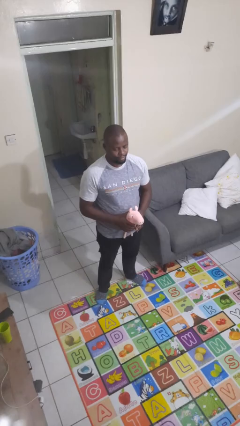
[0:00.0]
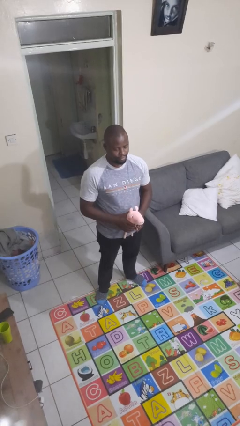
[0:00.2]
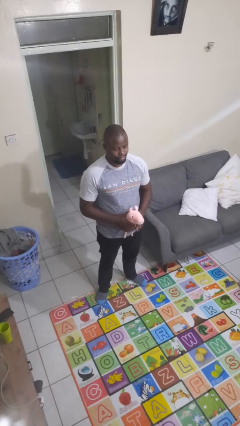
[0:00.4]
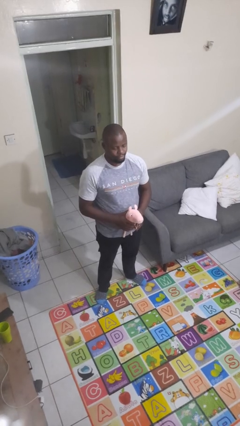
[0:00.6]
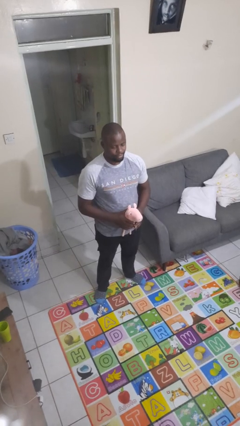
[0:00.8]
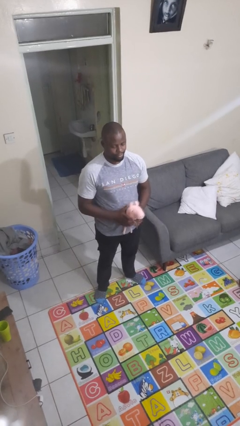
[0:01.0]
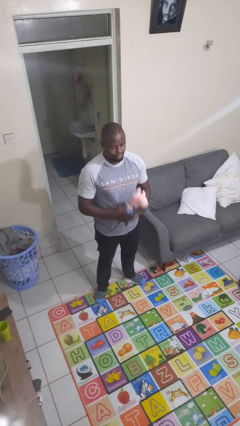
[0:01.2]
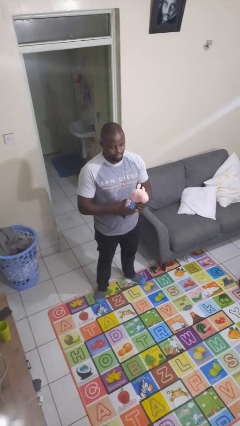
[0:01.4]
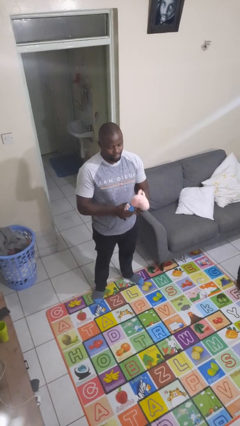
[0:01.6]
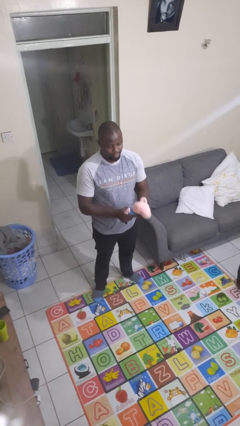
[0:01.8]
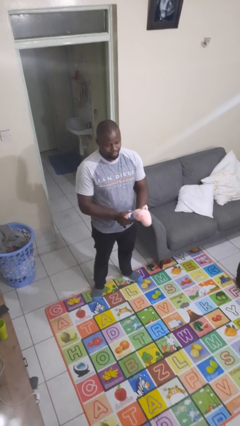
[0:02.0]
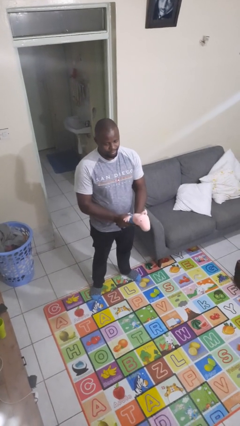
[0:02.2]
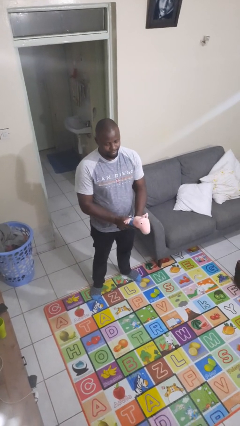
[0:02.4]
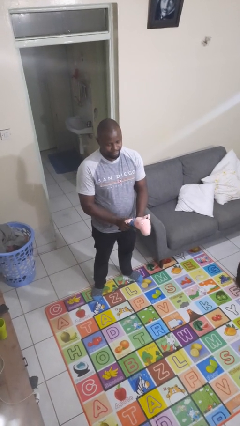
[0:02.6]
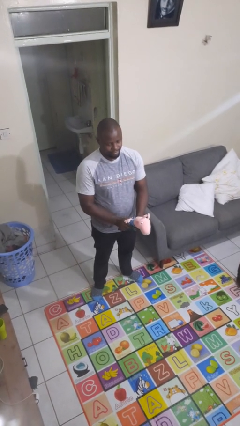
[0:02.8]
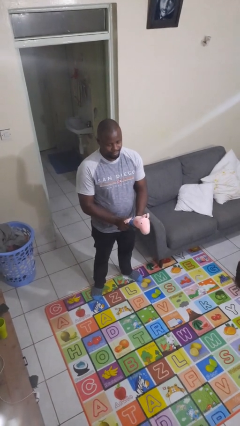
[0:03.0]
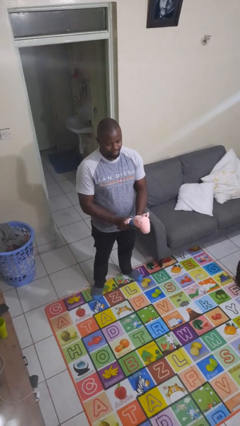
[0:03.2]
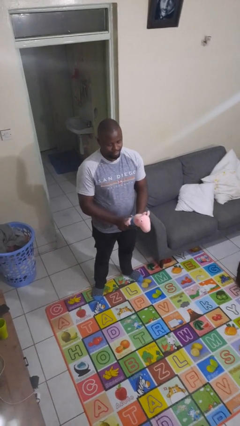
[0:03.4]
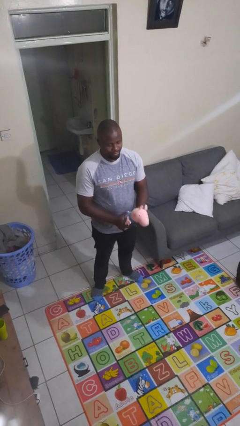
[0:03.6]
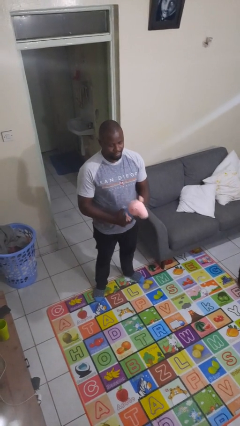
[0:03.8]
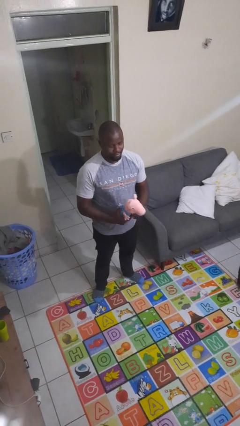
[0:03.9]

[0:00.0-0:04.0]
person squeezes object

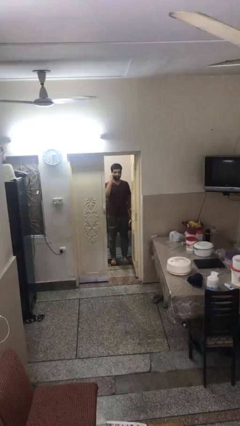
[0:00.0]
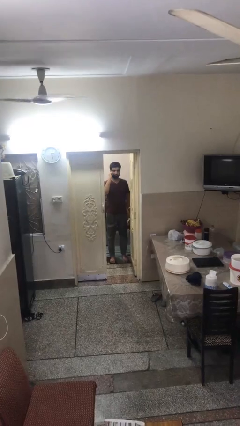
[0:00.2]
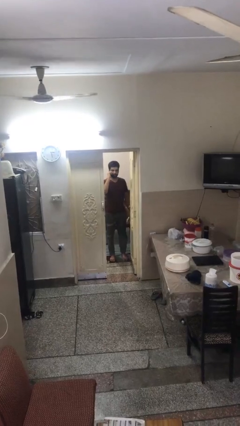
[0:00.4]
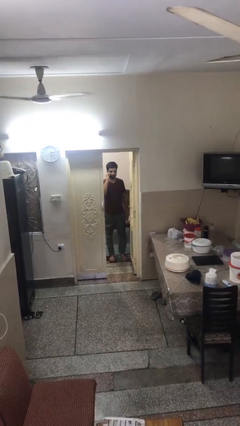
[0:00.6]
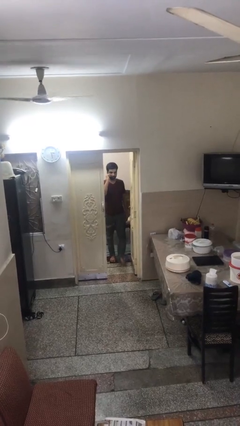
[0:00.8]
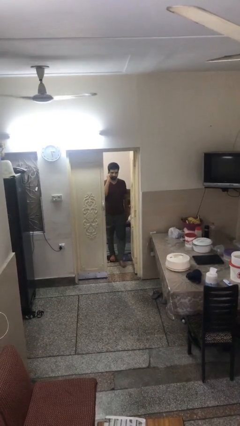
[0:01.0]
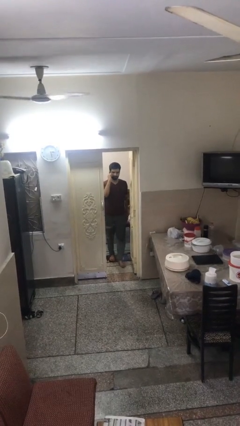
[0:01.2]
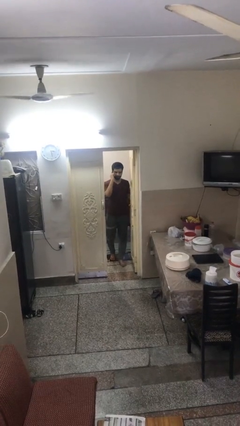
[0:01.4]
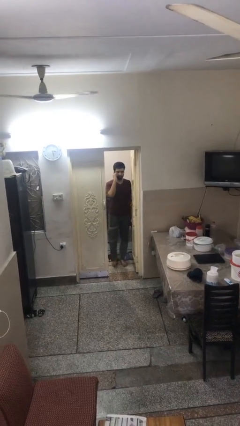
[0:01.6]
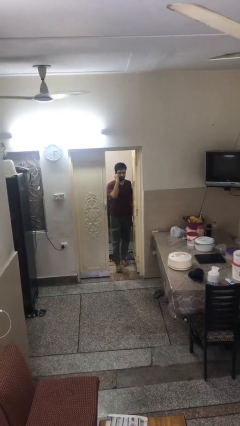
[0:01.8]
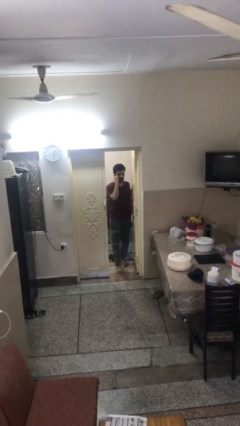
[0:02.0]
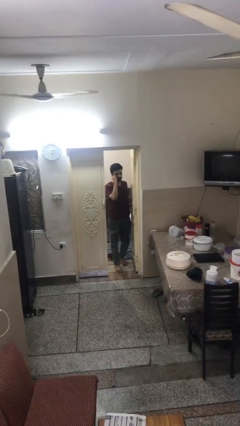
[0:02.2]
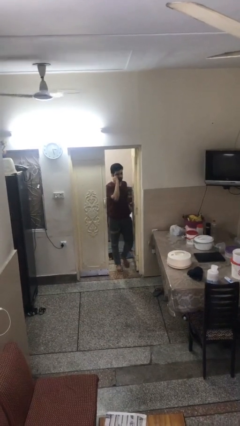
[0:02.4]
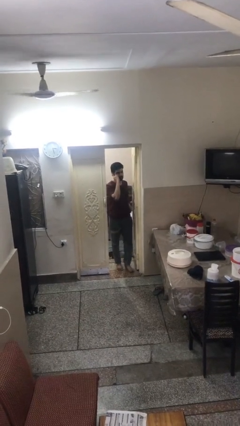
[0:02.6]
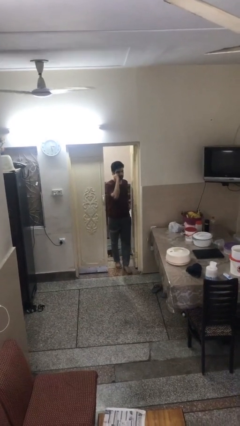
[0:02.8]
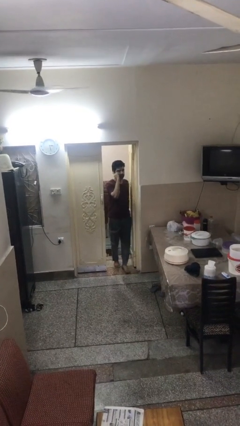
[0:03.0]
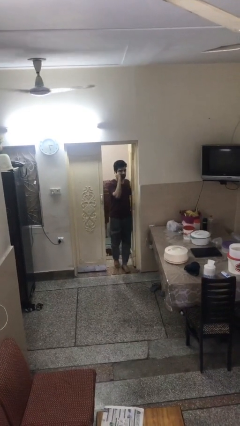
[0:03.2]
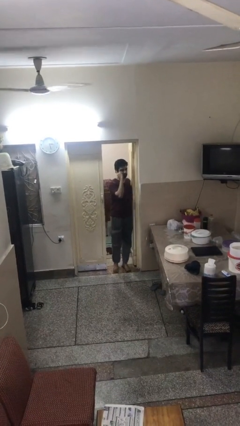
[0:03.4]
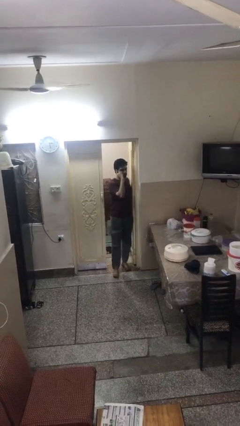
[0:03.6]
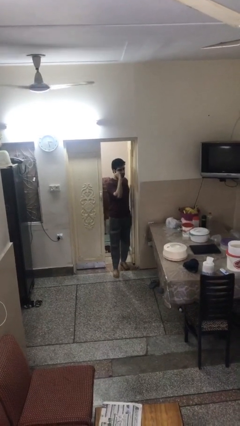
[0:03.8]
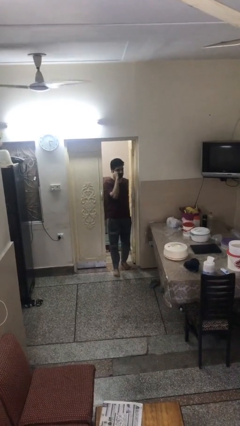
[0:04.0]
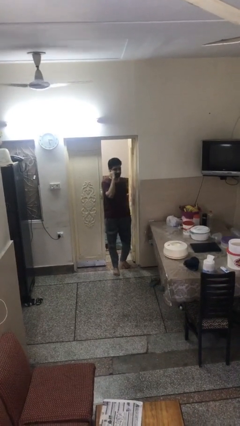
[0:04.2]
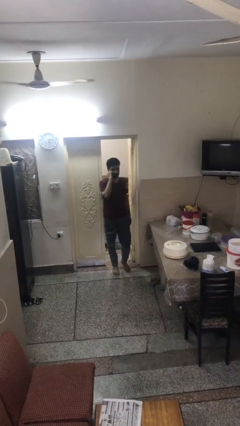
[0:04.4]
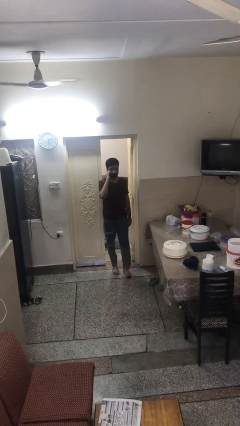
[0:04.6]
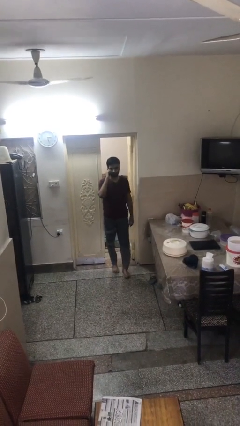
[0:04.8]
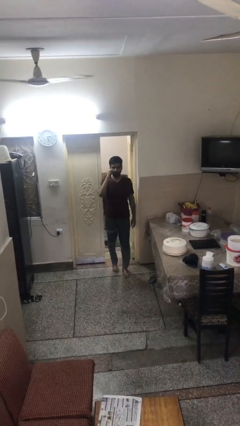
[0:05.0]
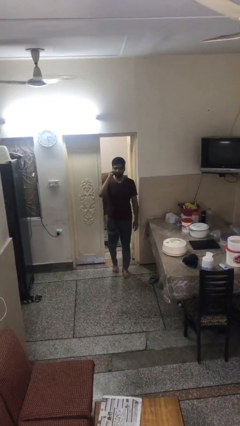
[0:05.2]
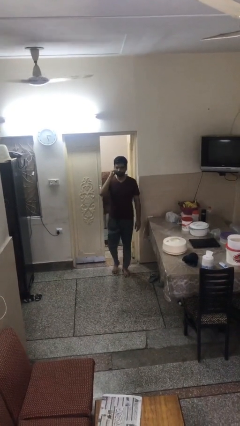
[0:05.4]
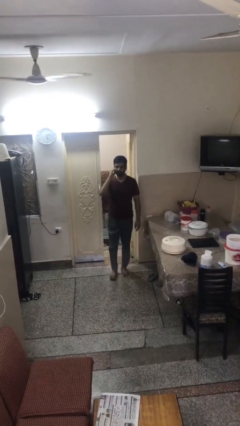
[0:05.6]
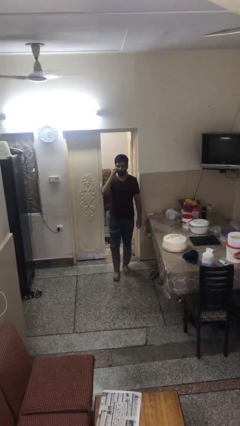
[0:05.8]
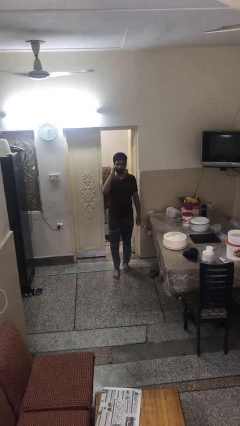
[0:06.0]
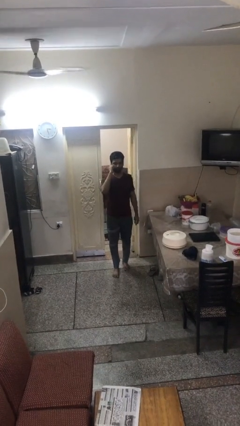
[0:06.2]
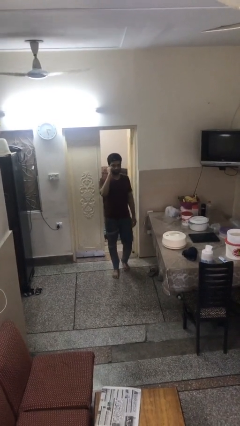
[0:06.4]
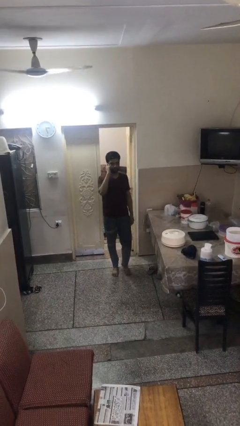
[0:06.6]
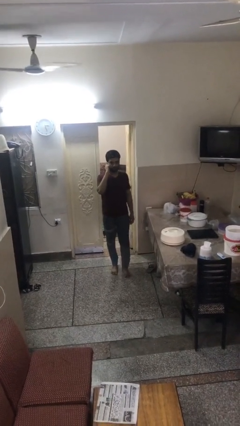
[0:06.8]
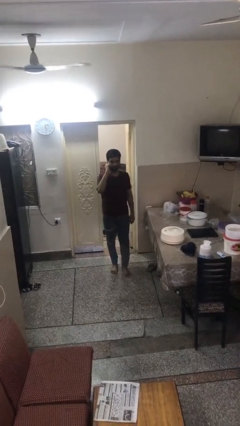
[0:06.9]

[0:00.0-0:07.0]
person enters scene through structure

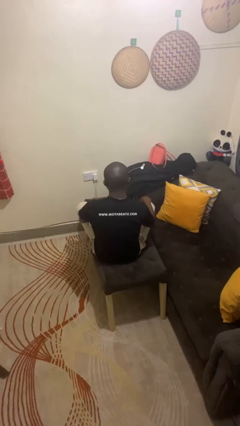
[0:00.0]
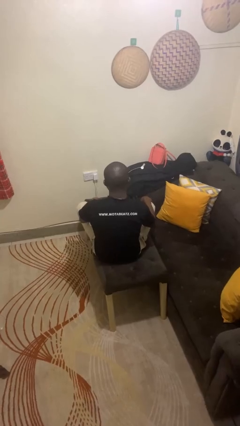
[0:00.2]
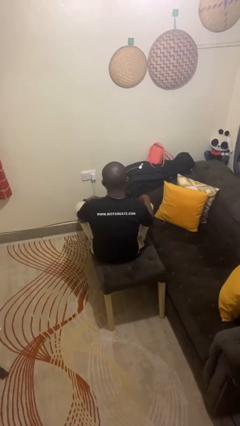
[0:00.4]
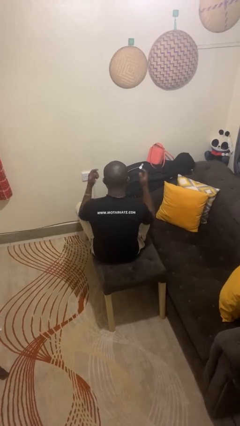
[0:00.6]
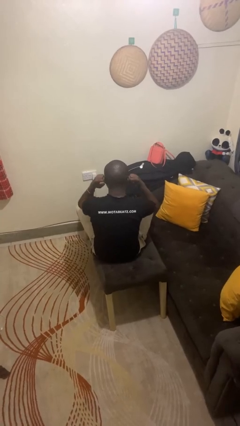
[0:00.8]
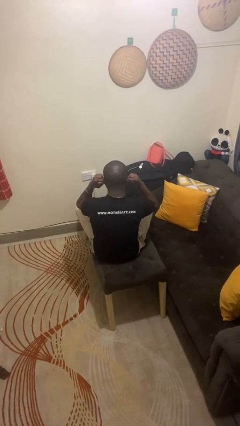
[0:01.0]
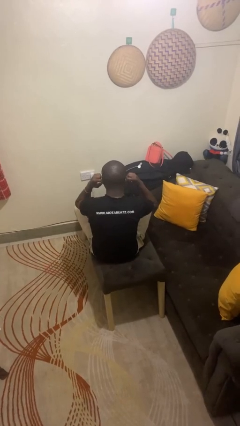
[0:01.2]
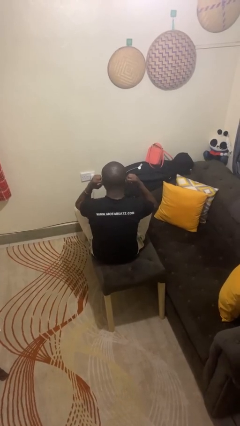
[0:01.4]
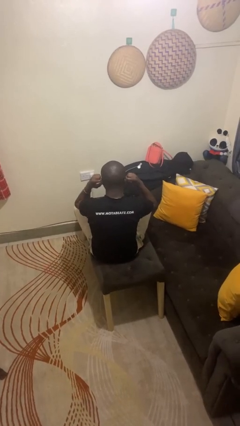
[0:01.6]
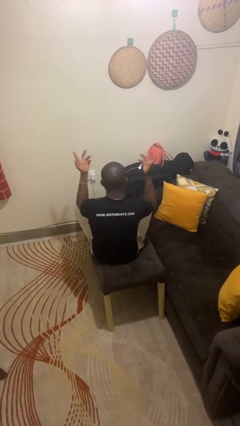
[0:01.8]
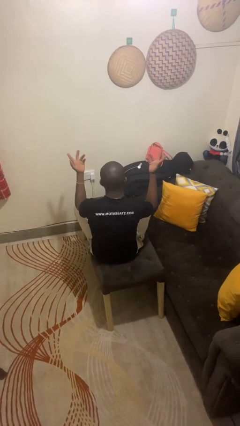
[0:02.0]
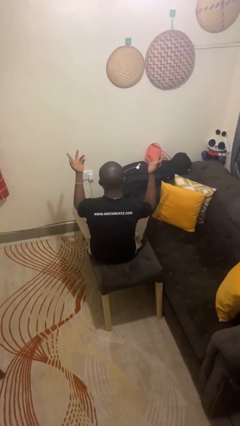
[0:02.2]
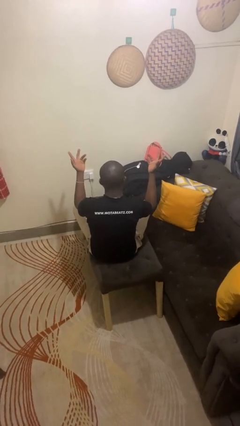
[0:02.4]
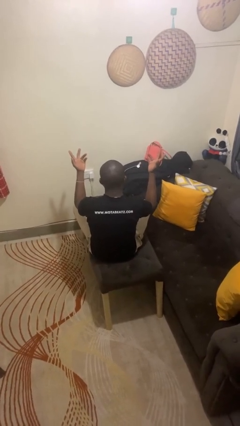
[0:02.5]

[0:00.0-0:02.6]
person puts fingers in ear

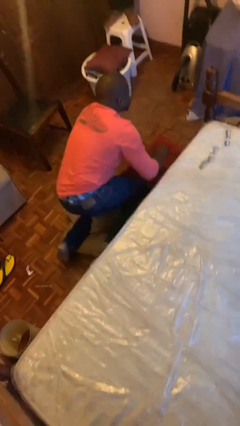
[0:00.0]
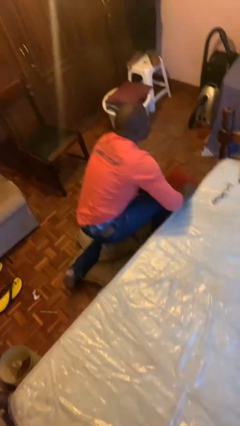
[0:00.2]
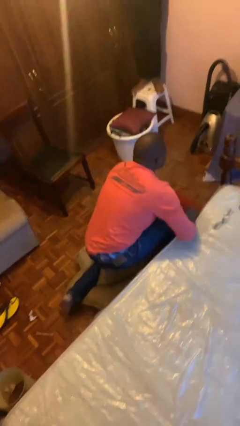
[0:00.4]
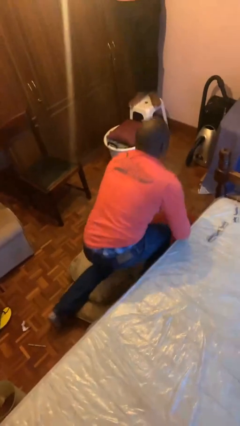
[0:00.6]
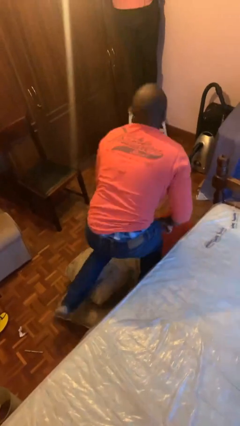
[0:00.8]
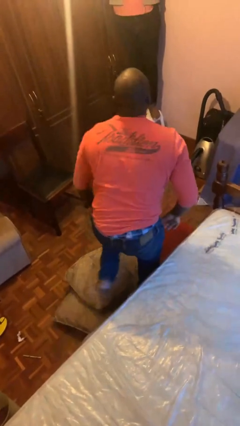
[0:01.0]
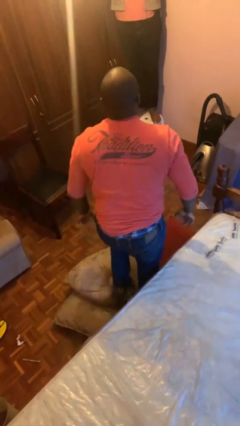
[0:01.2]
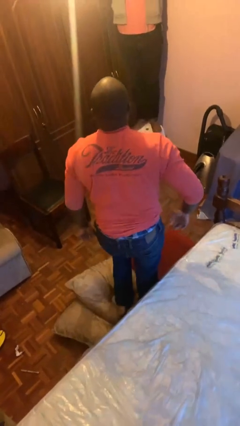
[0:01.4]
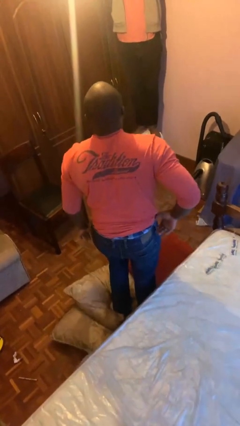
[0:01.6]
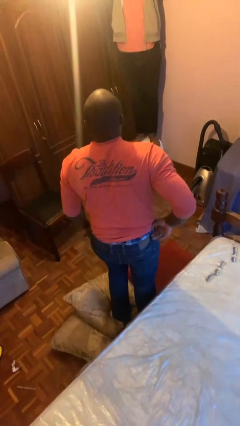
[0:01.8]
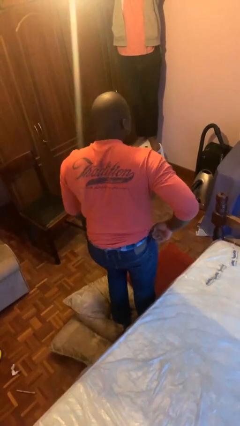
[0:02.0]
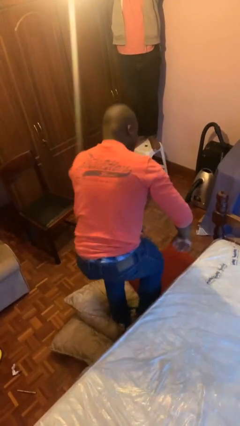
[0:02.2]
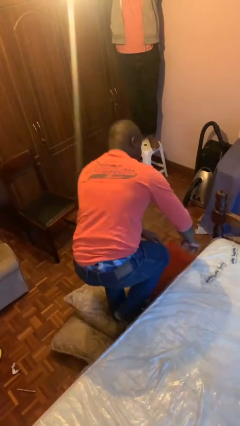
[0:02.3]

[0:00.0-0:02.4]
person stands up from floor

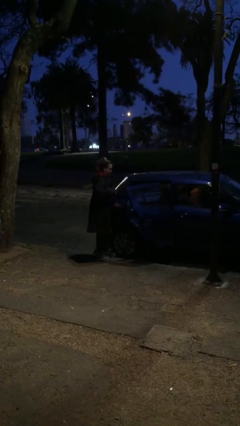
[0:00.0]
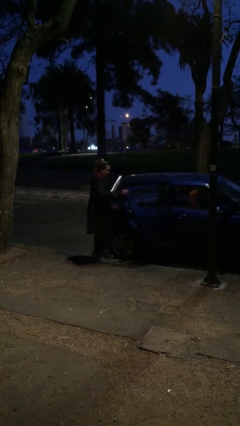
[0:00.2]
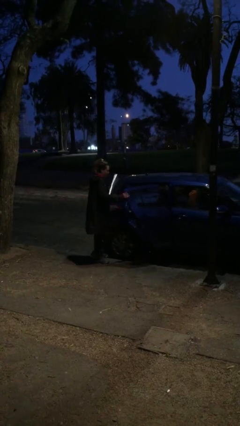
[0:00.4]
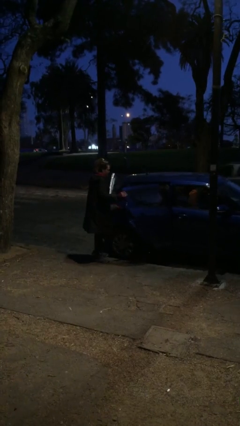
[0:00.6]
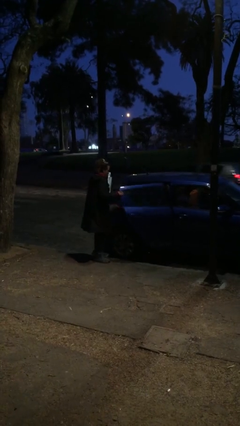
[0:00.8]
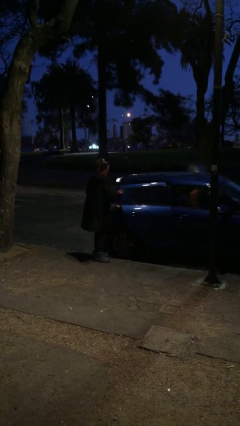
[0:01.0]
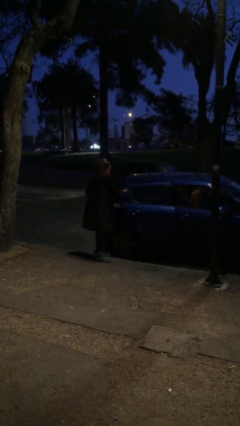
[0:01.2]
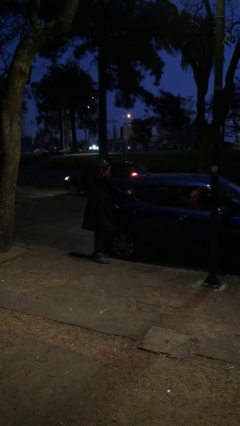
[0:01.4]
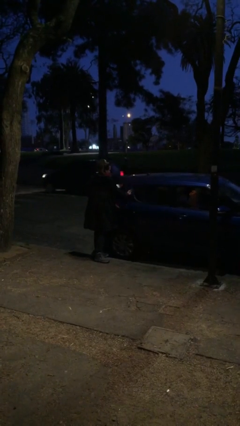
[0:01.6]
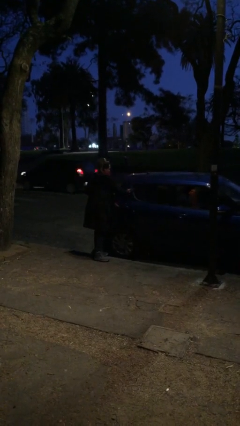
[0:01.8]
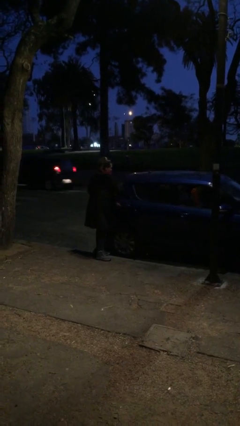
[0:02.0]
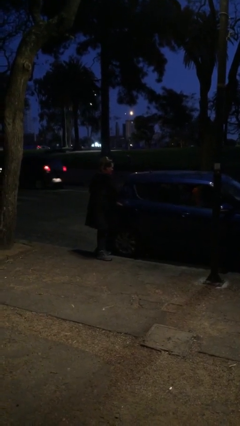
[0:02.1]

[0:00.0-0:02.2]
person closes car door
